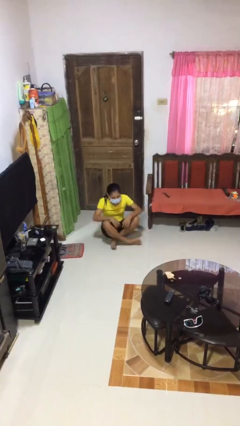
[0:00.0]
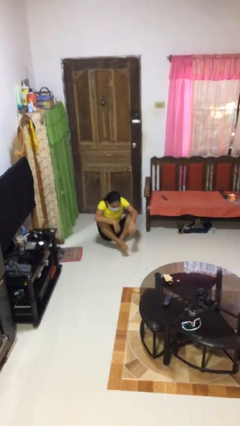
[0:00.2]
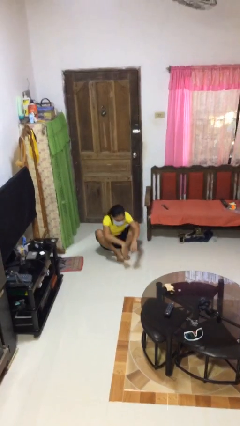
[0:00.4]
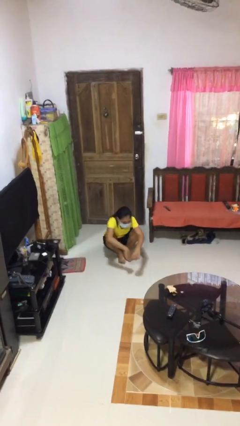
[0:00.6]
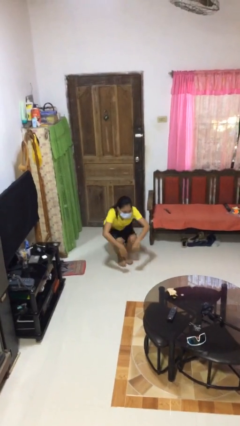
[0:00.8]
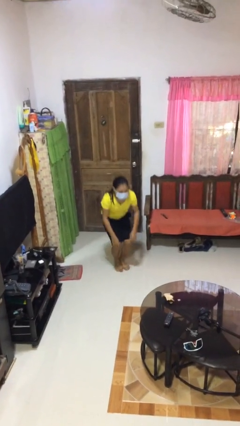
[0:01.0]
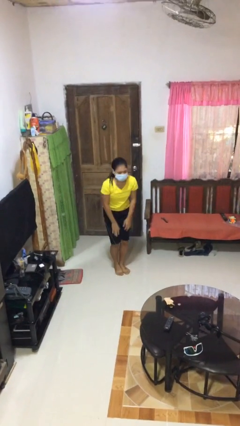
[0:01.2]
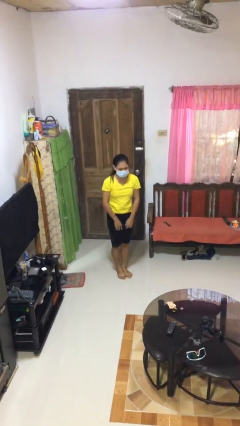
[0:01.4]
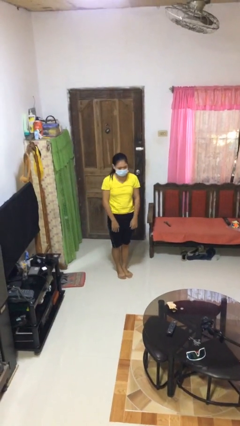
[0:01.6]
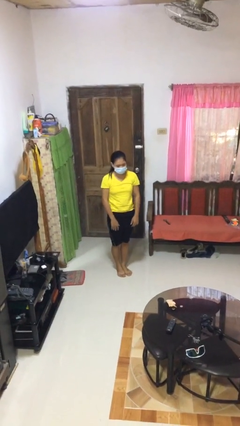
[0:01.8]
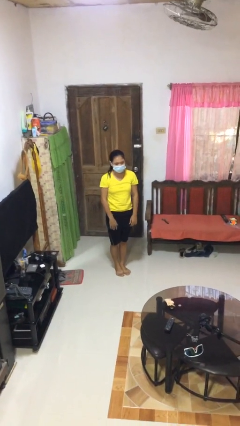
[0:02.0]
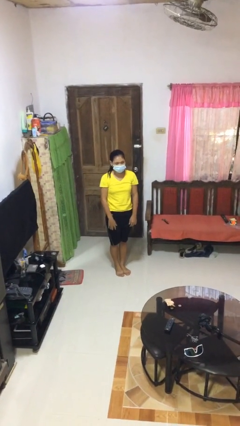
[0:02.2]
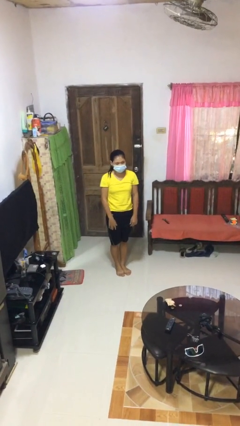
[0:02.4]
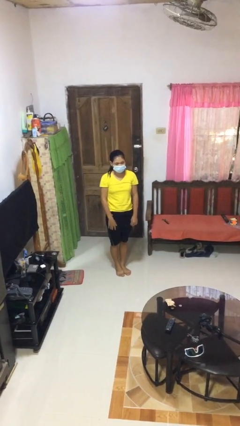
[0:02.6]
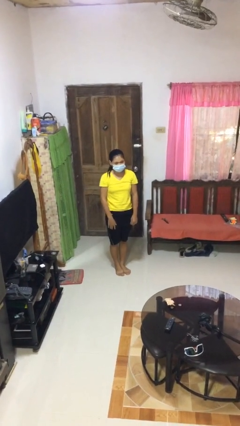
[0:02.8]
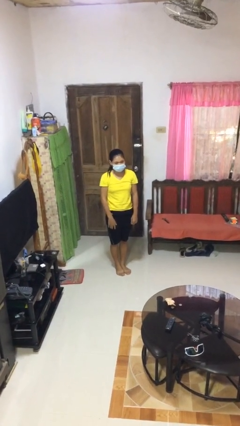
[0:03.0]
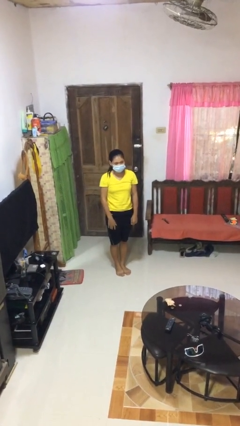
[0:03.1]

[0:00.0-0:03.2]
person stands up from floor

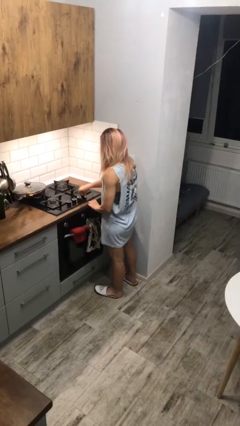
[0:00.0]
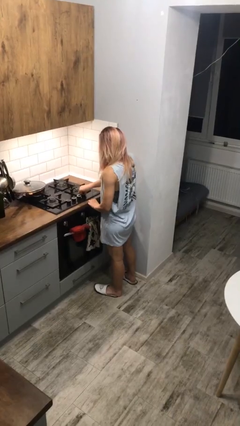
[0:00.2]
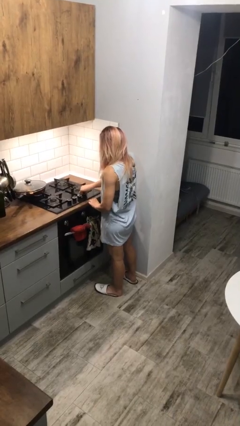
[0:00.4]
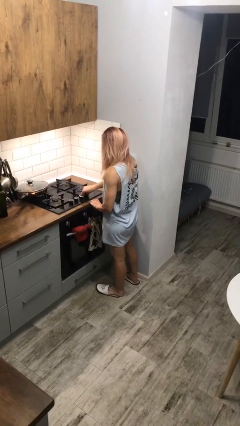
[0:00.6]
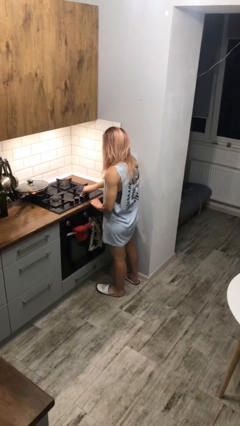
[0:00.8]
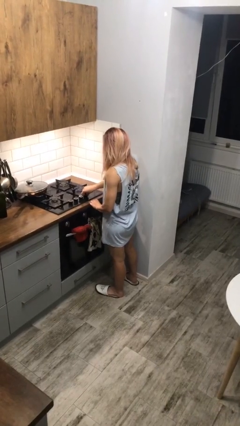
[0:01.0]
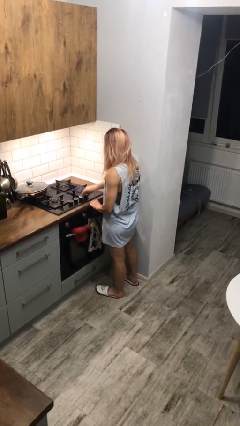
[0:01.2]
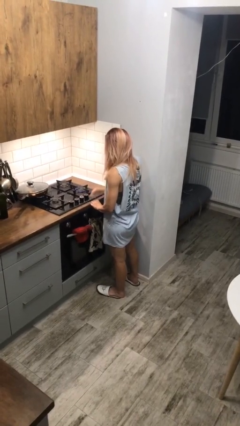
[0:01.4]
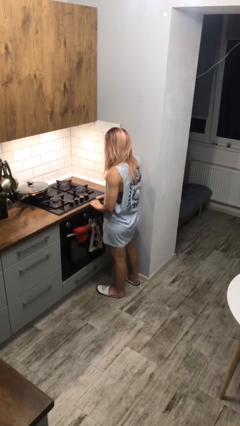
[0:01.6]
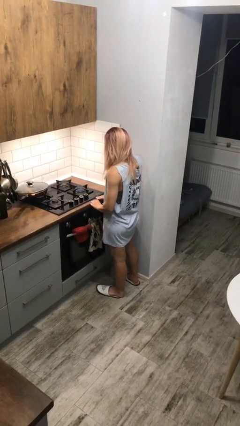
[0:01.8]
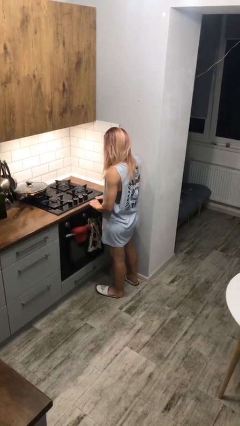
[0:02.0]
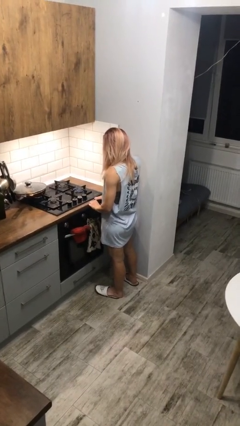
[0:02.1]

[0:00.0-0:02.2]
person turns on stovetop

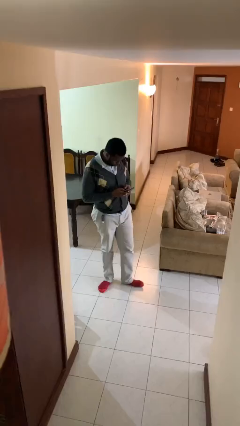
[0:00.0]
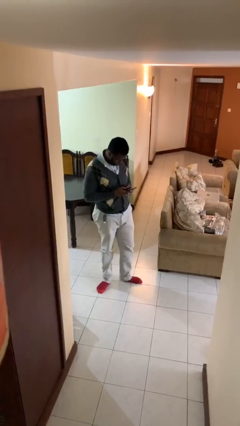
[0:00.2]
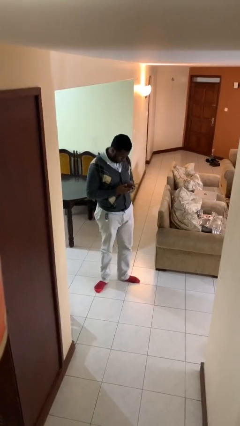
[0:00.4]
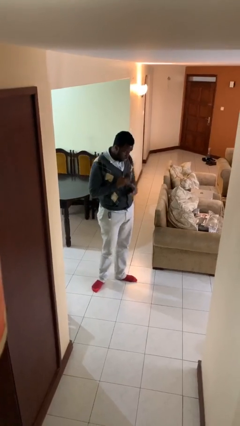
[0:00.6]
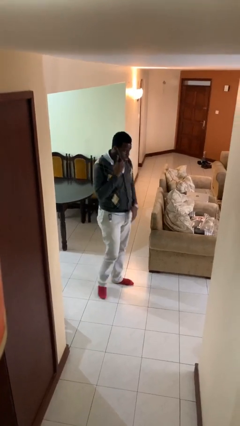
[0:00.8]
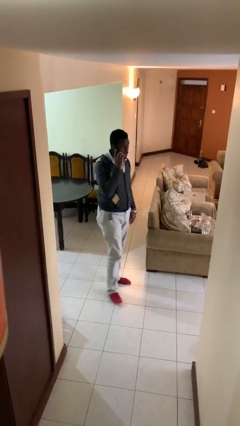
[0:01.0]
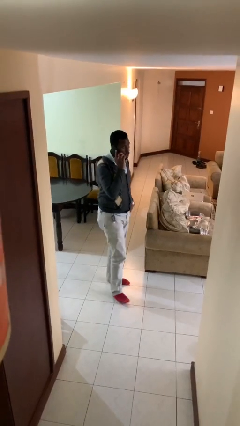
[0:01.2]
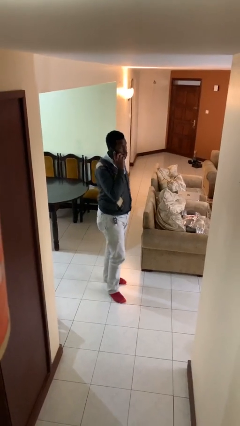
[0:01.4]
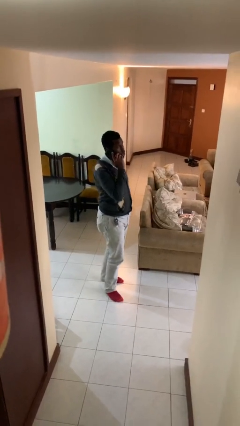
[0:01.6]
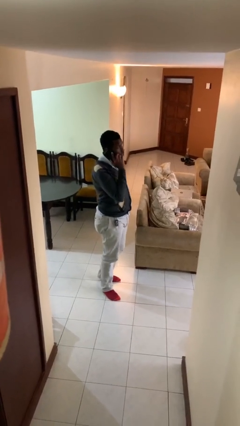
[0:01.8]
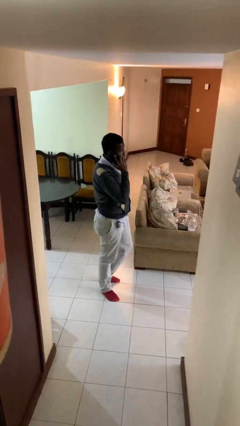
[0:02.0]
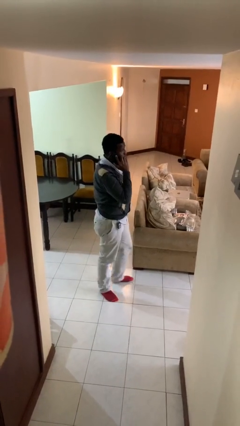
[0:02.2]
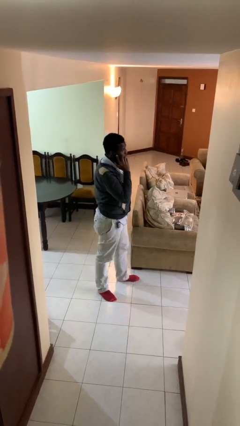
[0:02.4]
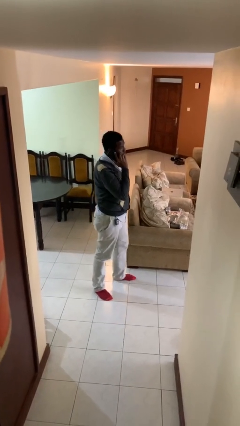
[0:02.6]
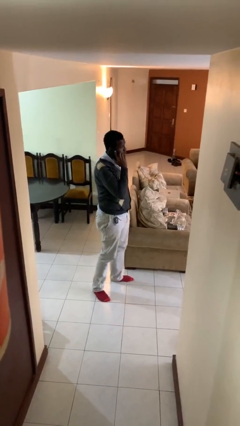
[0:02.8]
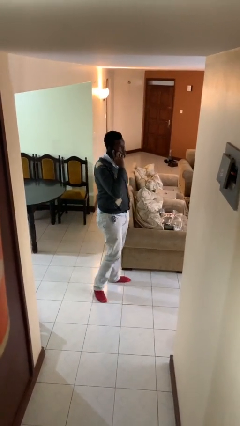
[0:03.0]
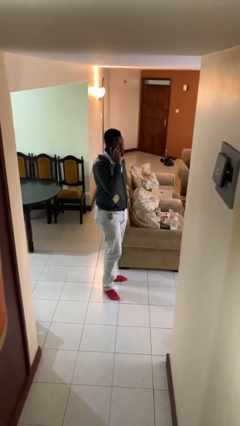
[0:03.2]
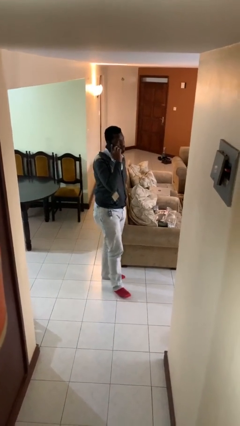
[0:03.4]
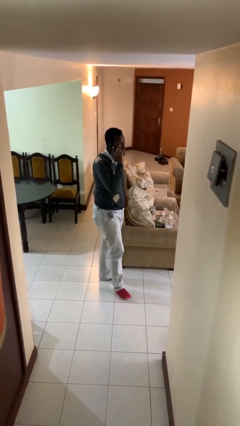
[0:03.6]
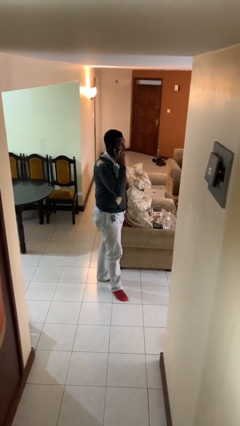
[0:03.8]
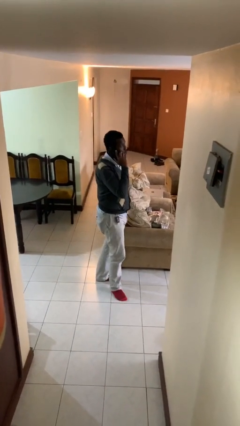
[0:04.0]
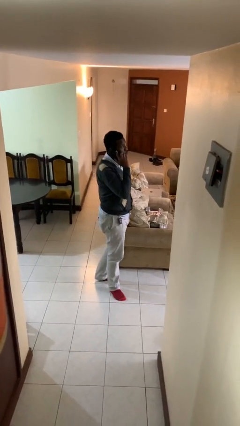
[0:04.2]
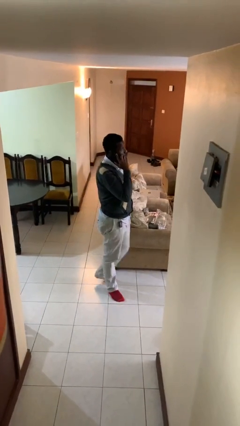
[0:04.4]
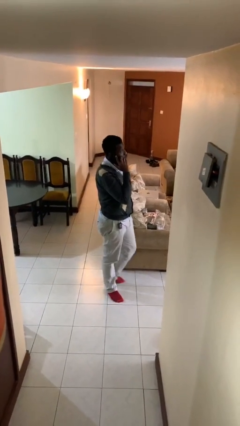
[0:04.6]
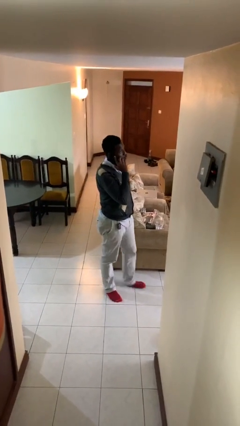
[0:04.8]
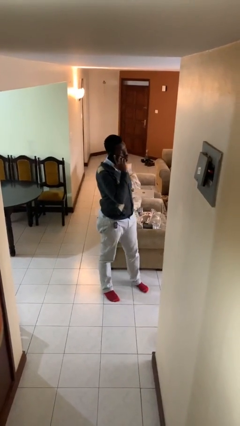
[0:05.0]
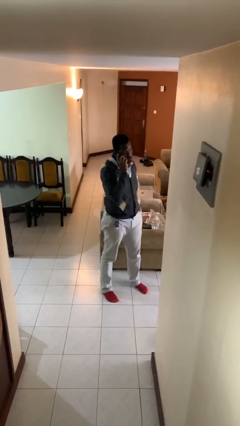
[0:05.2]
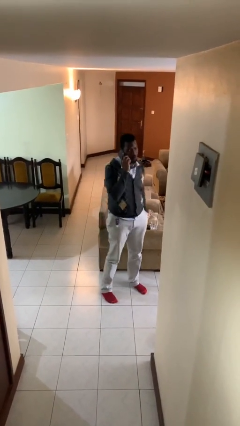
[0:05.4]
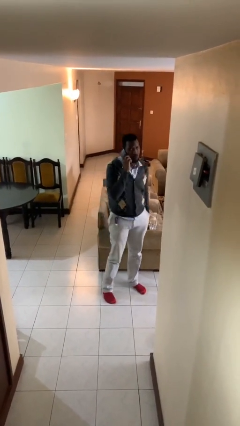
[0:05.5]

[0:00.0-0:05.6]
person talks on phone

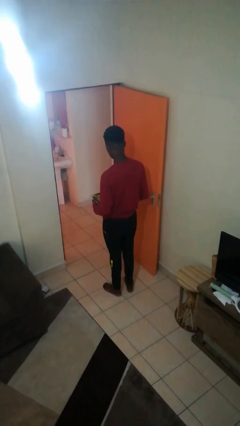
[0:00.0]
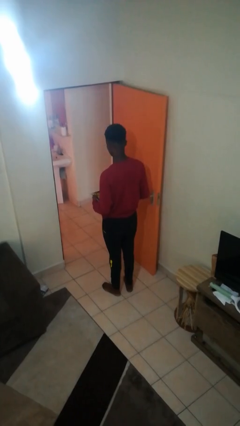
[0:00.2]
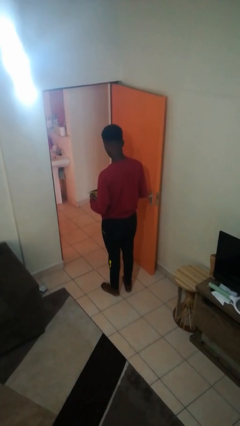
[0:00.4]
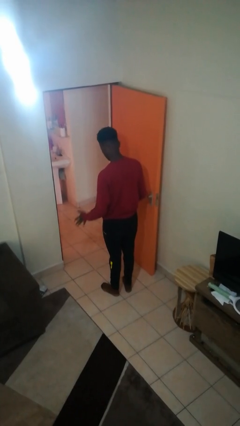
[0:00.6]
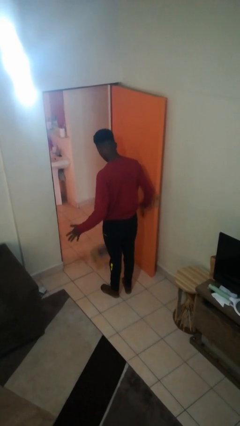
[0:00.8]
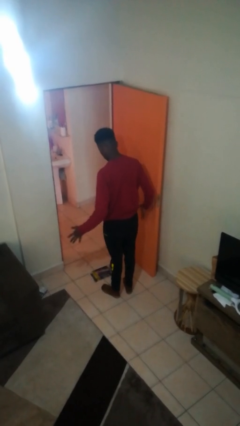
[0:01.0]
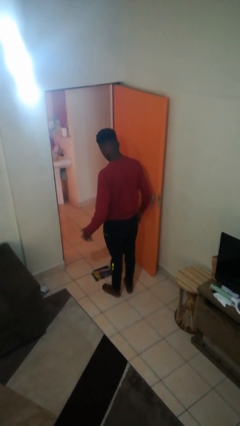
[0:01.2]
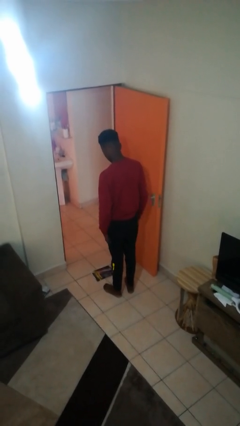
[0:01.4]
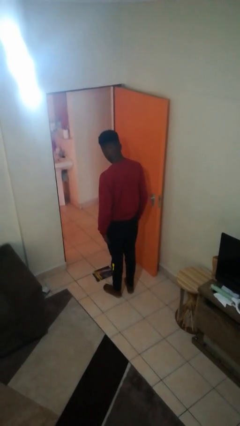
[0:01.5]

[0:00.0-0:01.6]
person drops object

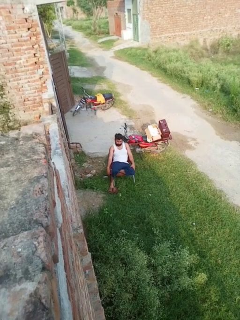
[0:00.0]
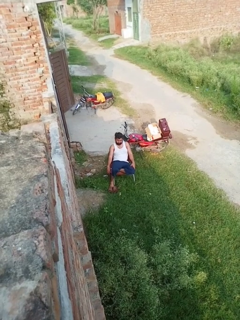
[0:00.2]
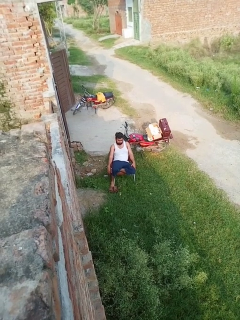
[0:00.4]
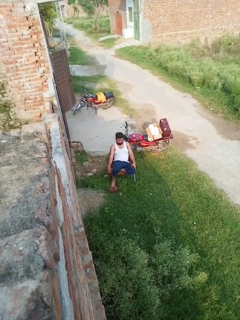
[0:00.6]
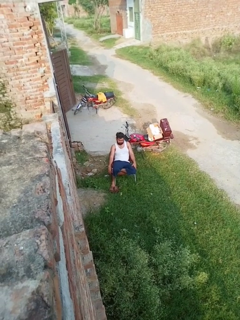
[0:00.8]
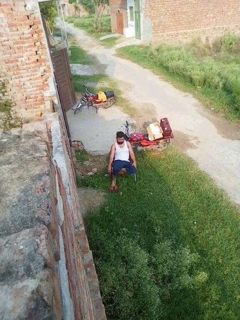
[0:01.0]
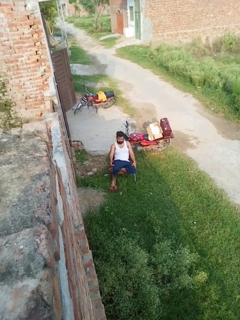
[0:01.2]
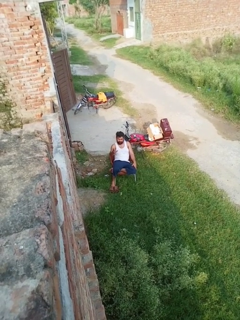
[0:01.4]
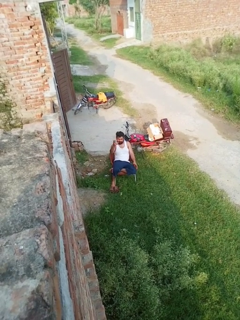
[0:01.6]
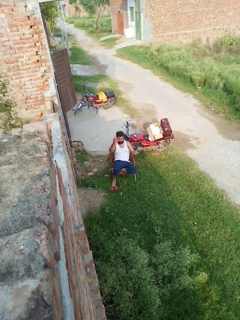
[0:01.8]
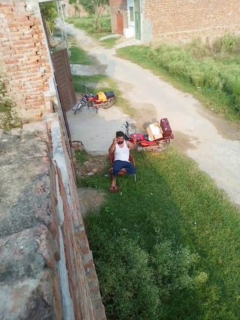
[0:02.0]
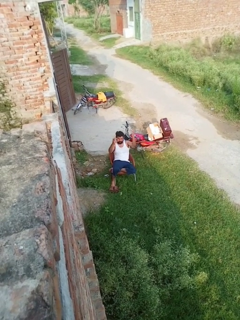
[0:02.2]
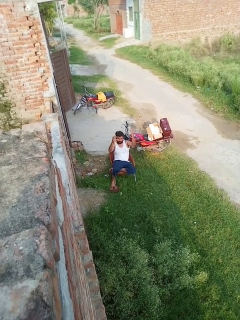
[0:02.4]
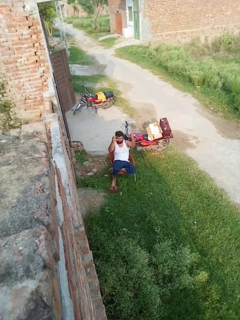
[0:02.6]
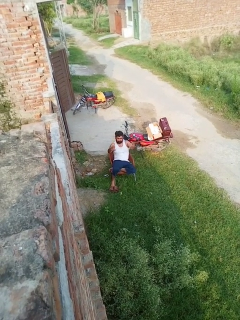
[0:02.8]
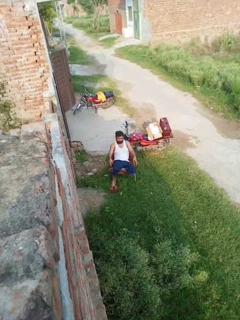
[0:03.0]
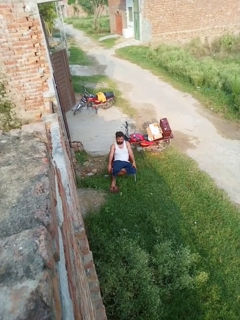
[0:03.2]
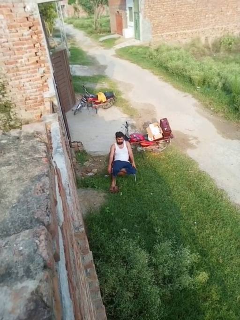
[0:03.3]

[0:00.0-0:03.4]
person gestures lower hand

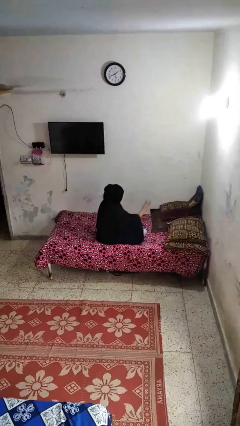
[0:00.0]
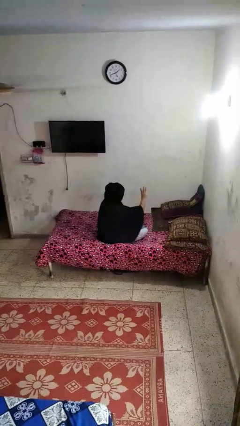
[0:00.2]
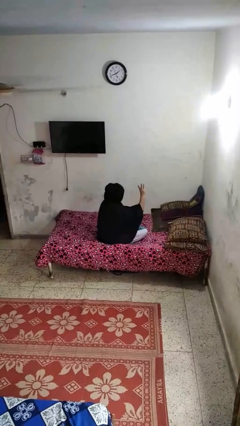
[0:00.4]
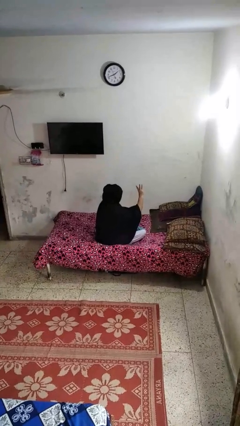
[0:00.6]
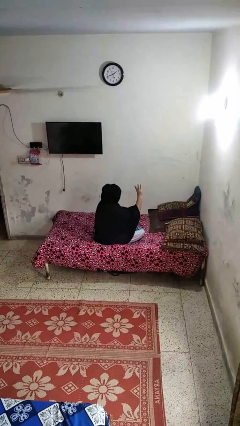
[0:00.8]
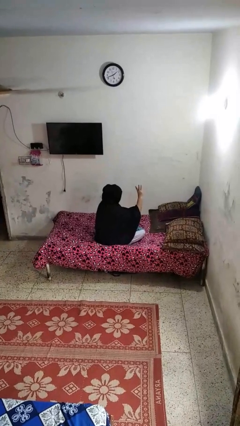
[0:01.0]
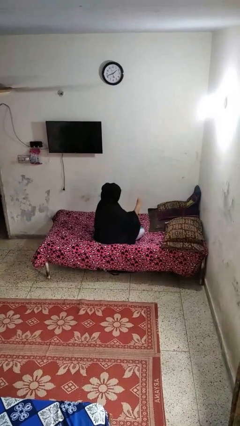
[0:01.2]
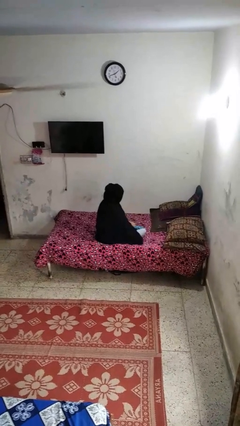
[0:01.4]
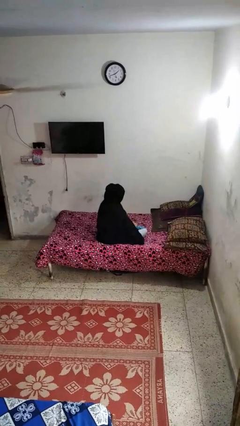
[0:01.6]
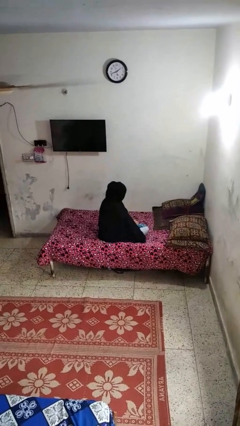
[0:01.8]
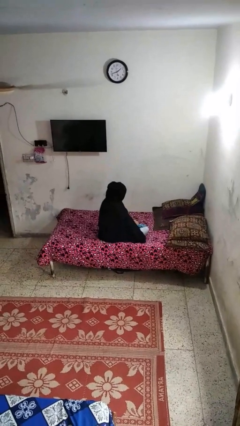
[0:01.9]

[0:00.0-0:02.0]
person gestures number three

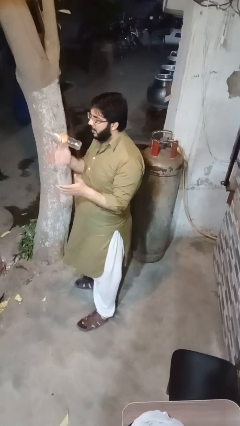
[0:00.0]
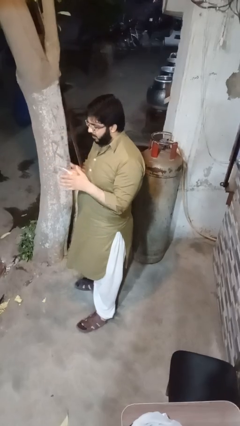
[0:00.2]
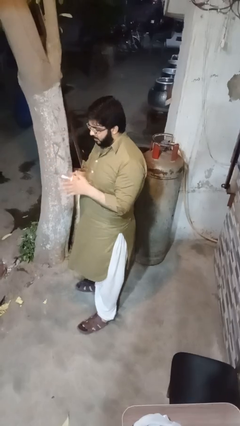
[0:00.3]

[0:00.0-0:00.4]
person picks up object from floor
